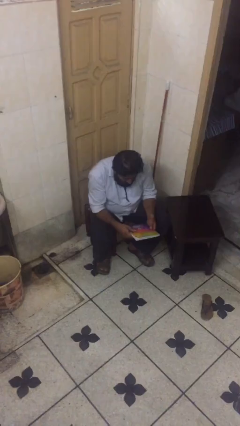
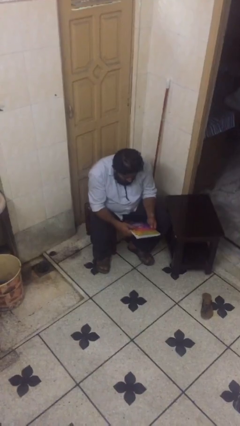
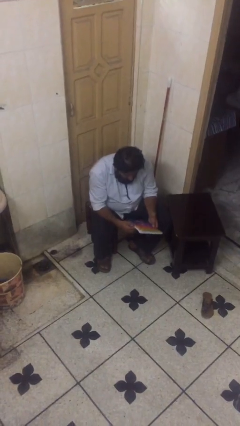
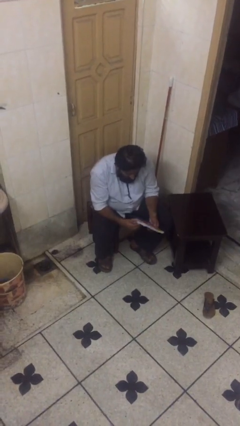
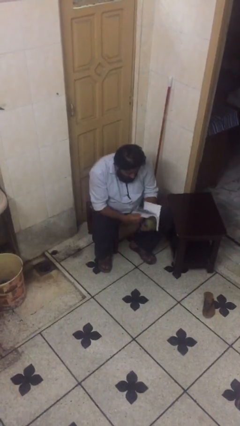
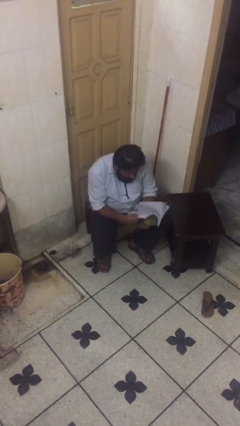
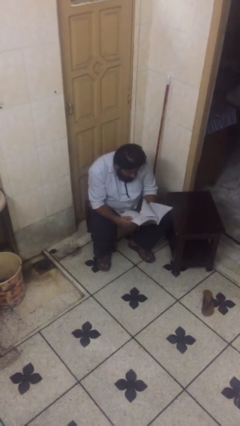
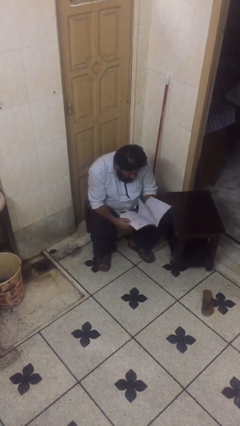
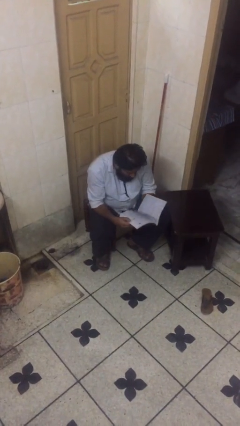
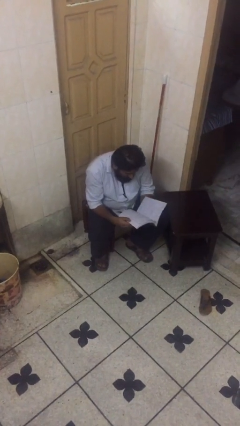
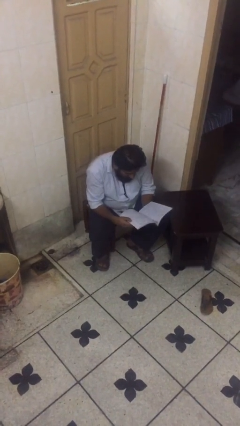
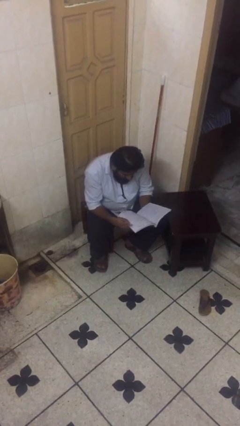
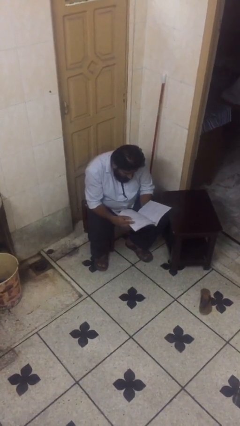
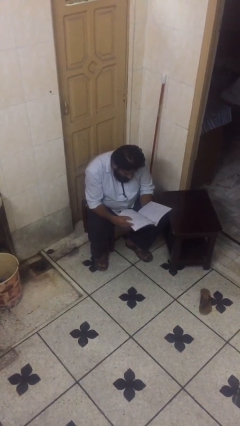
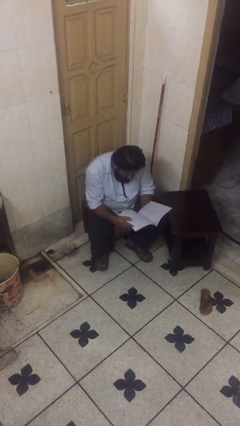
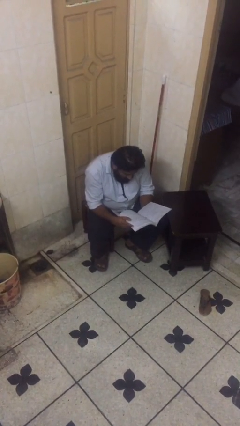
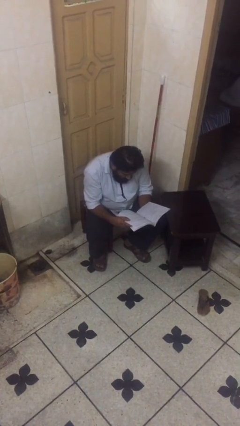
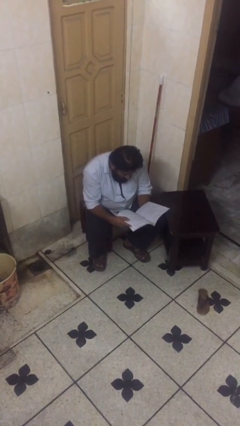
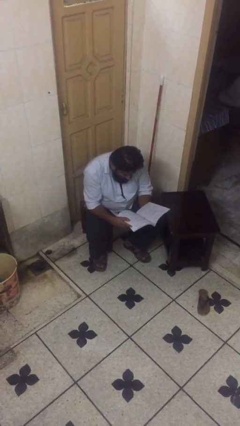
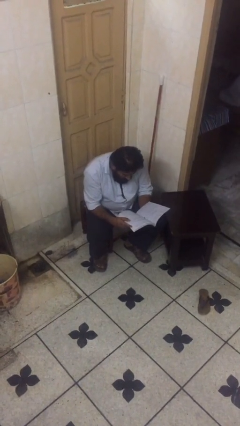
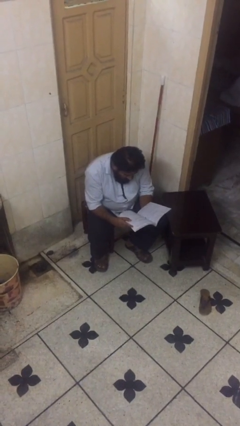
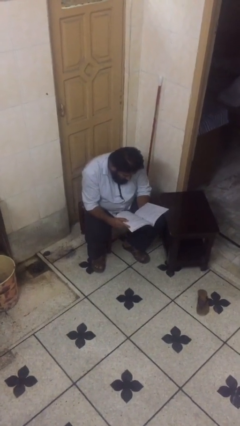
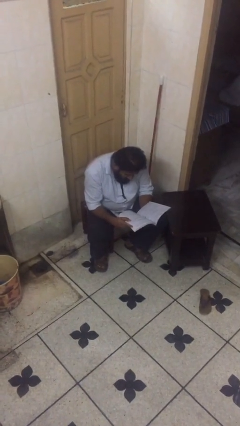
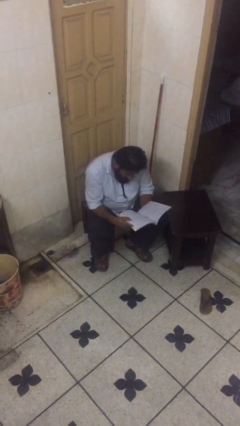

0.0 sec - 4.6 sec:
person reads document

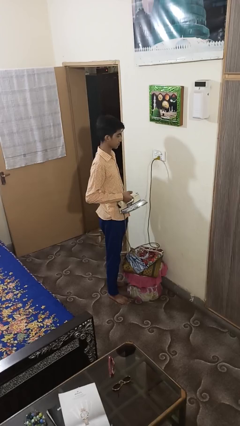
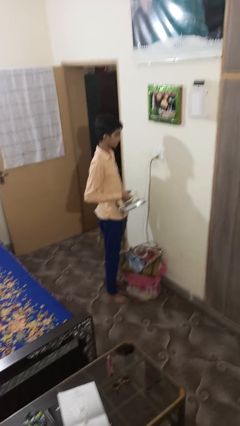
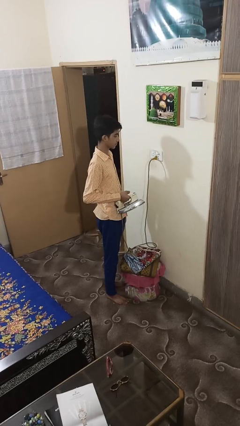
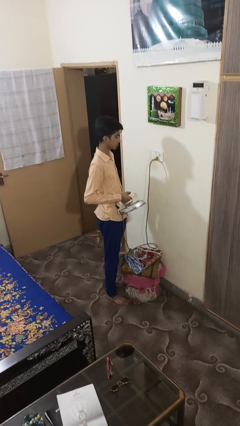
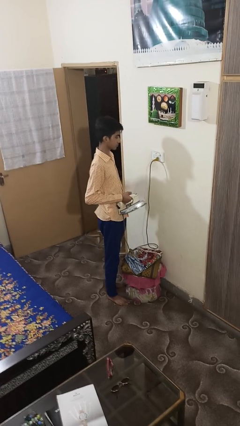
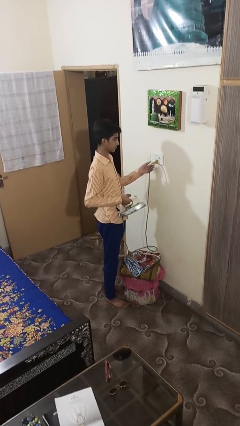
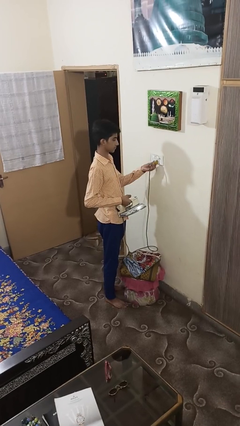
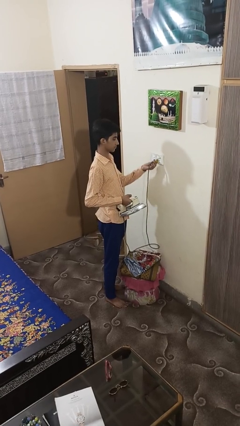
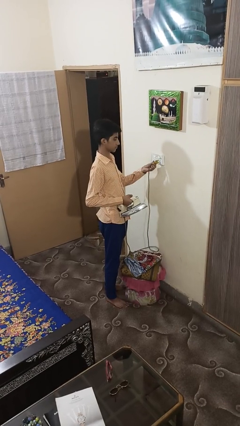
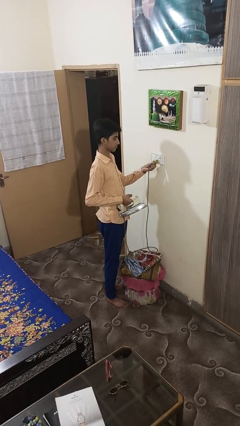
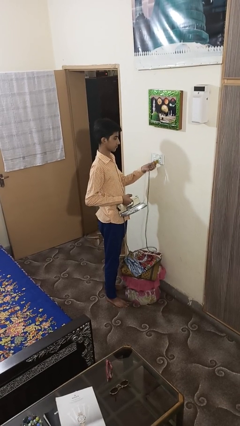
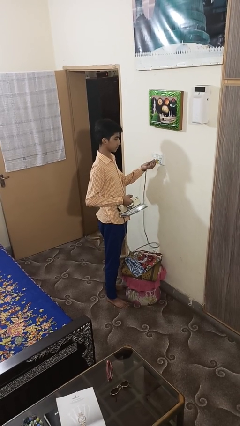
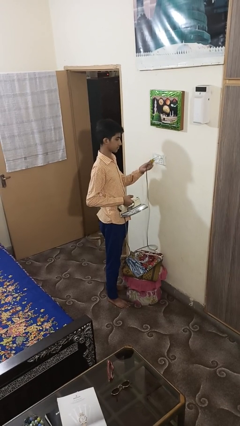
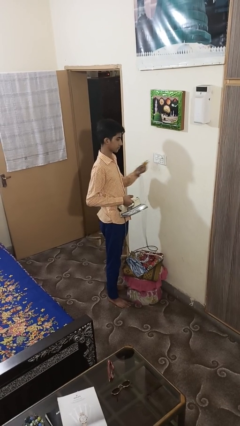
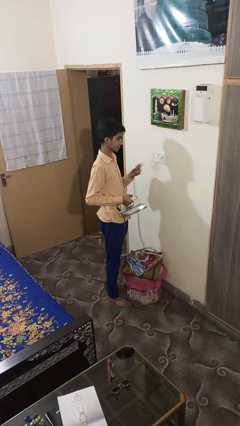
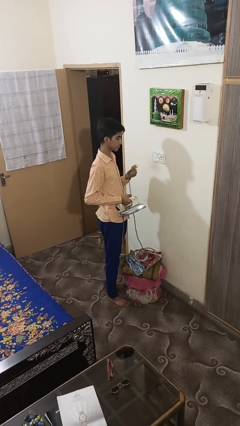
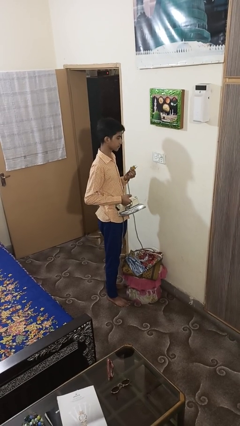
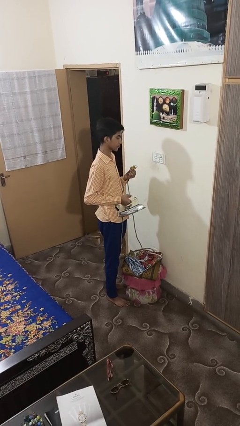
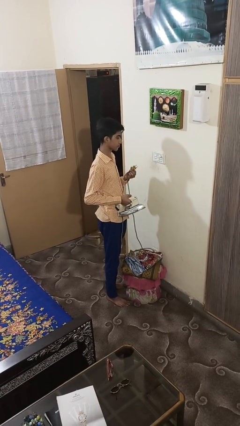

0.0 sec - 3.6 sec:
person unplugs from electrical socket

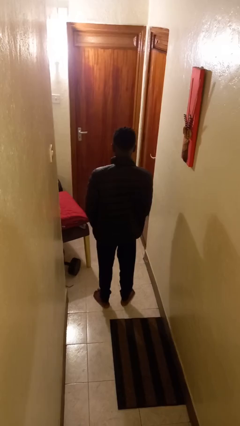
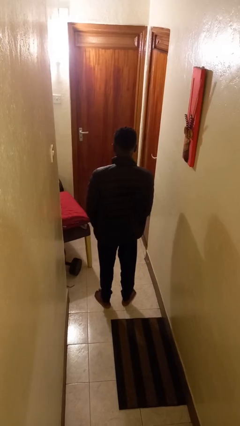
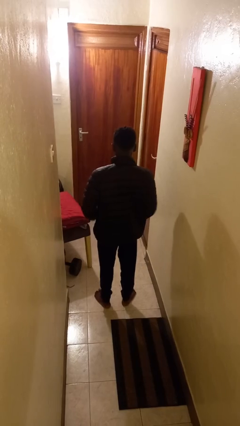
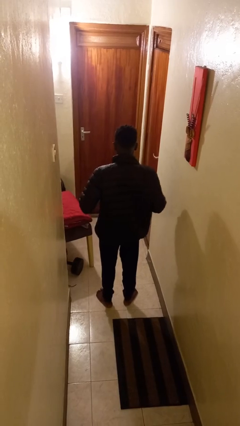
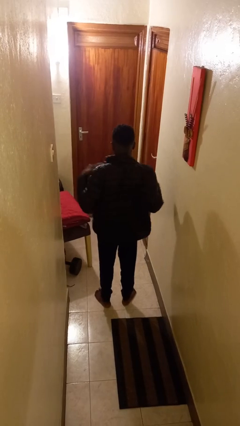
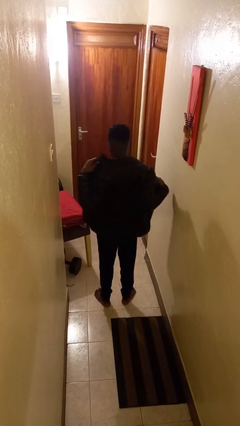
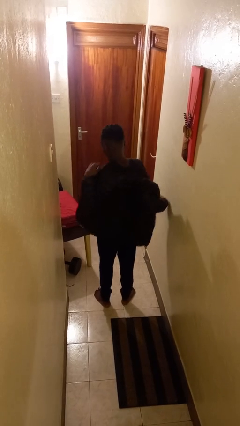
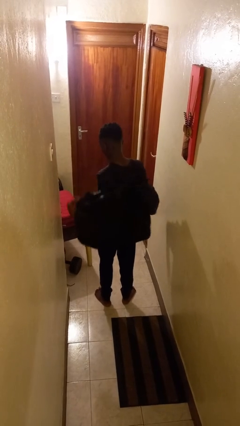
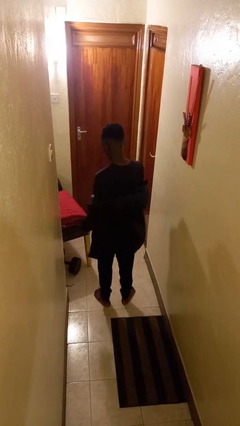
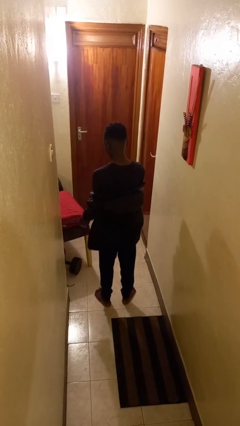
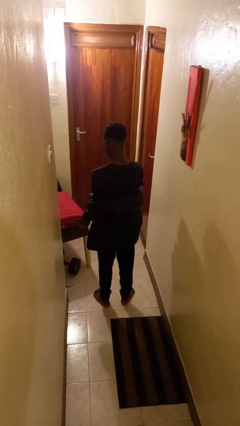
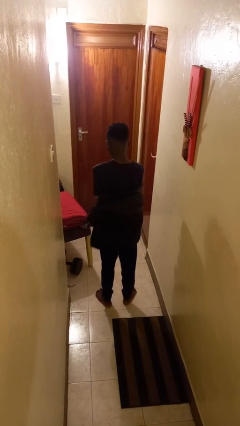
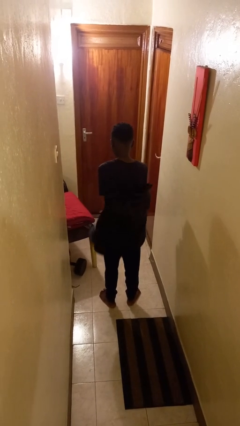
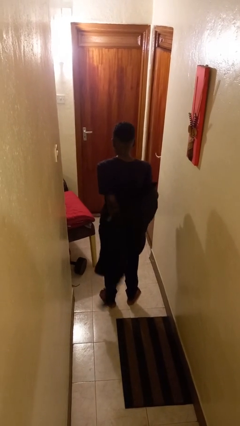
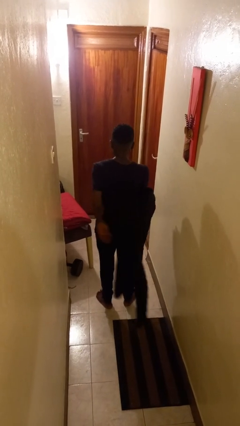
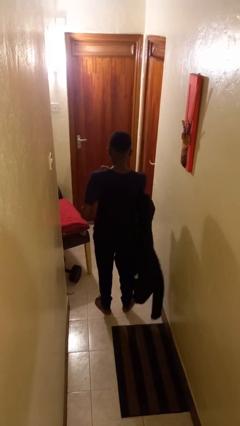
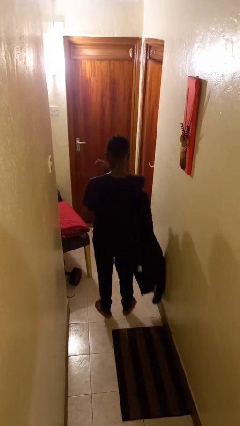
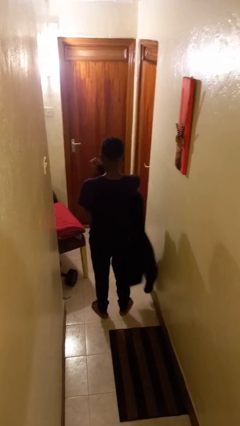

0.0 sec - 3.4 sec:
person takes off jacket

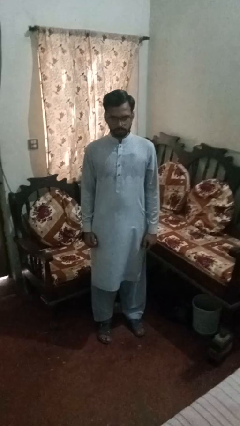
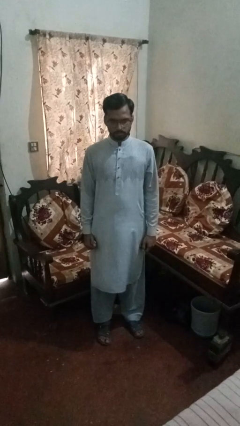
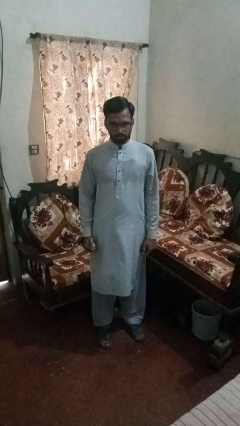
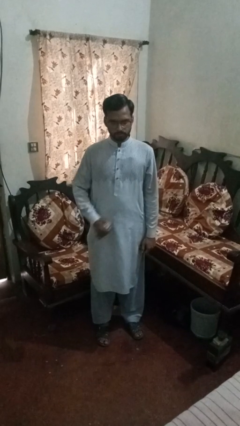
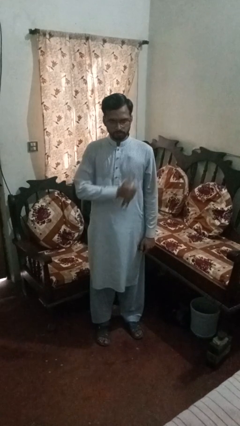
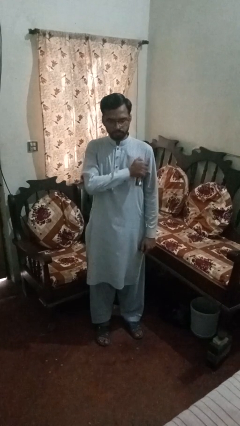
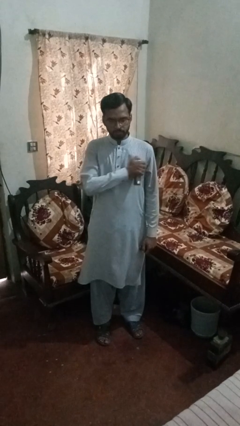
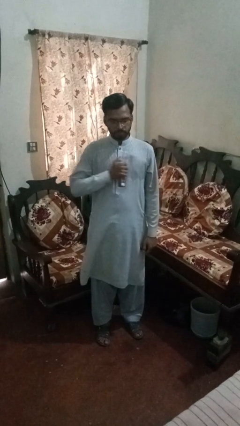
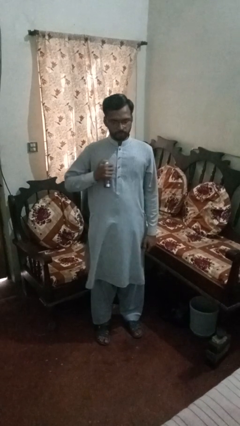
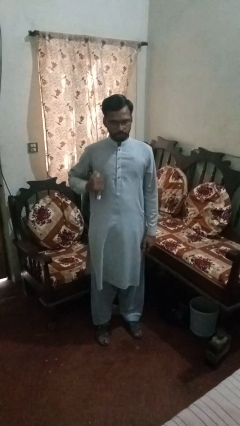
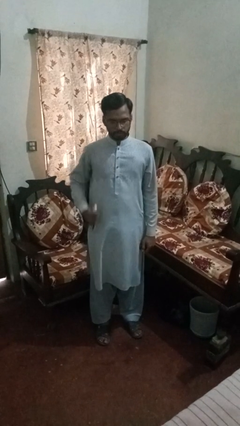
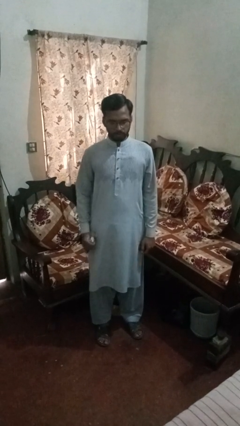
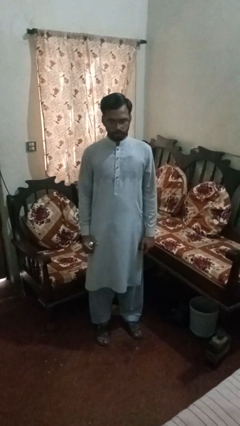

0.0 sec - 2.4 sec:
person applies deodorant

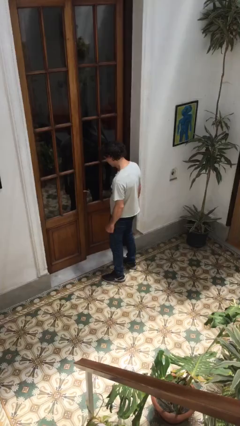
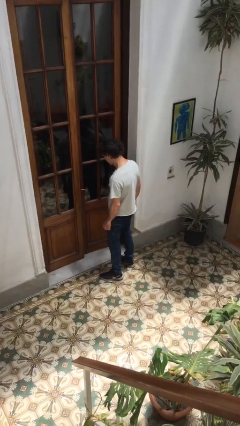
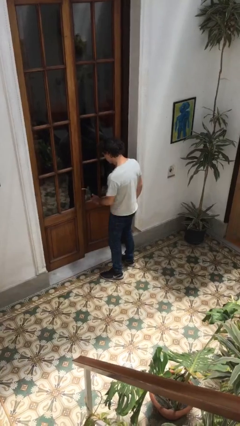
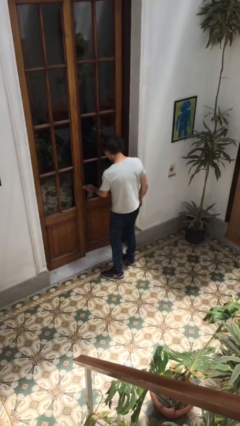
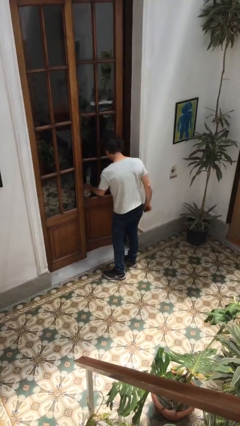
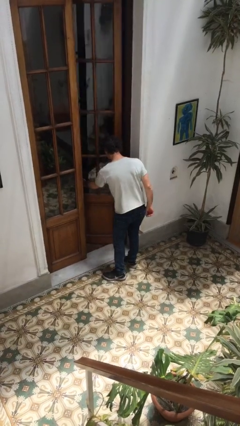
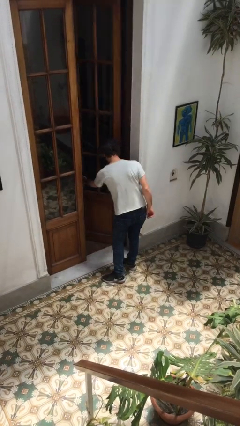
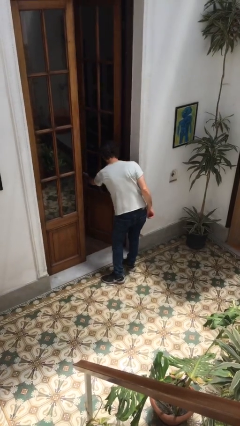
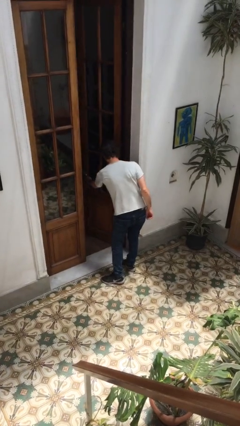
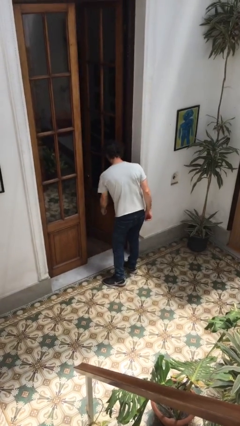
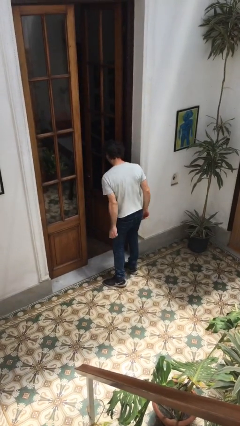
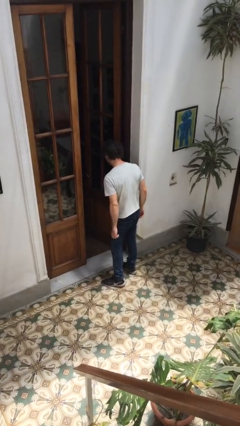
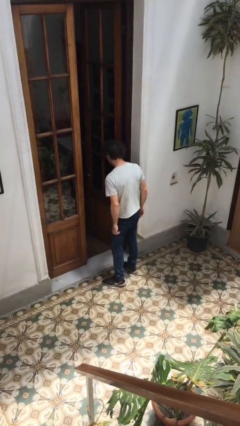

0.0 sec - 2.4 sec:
person opens facility door

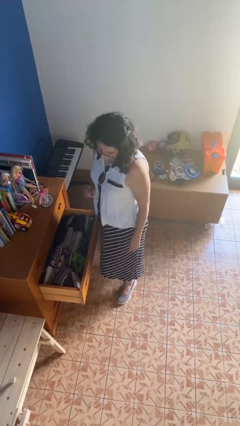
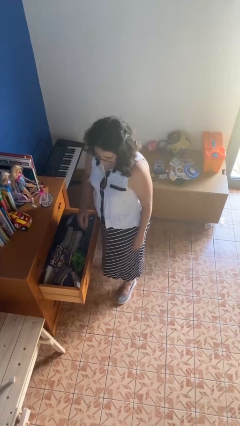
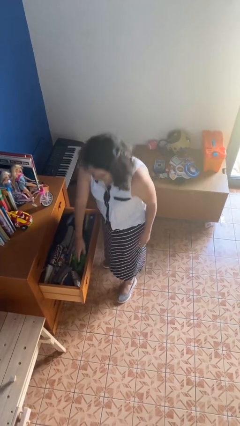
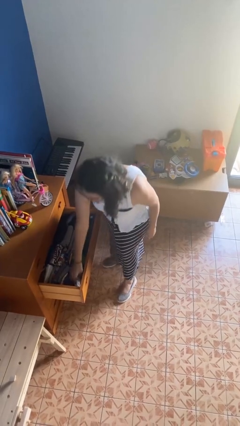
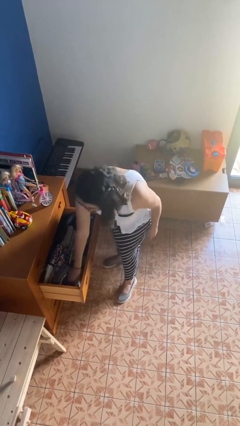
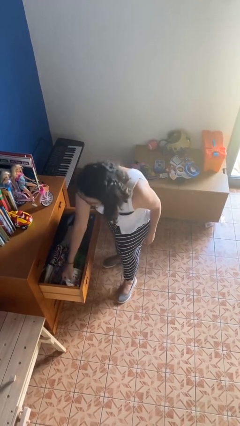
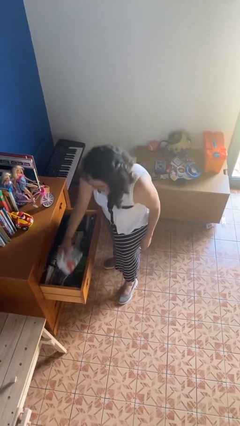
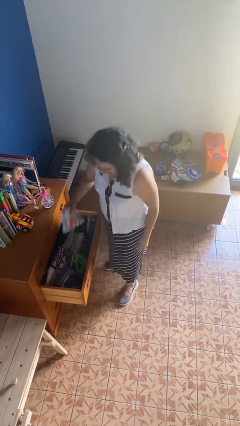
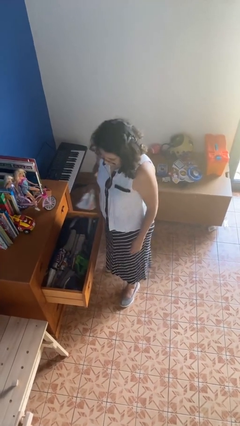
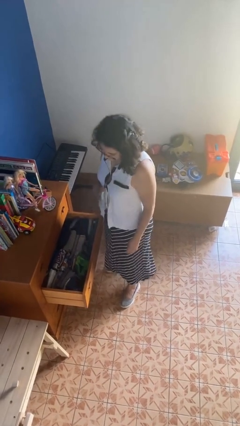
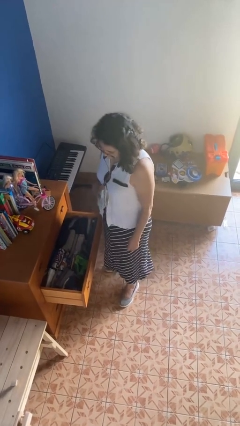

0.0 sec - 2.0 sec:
person takes clothes from dresser
